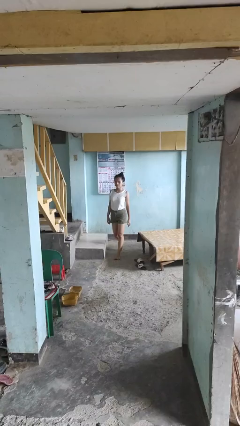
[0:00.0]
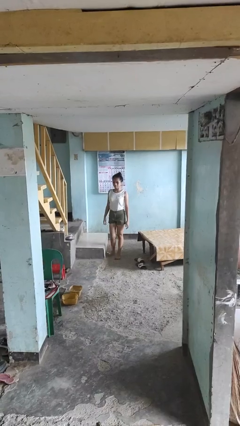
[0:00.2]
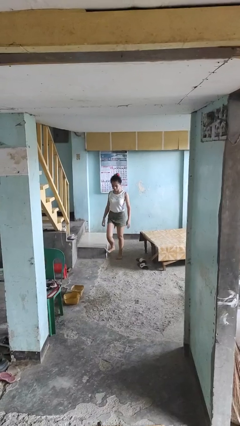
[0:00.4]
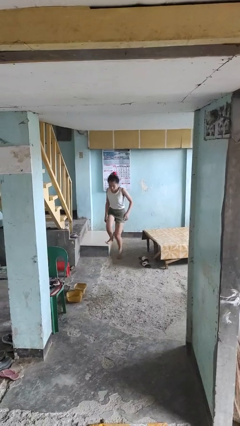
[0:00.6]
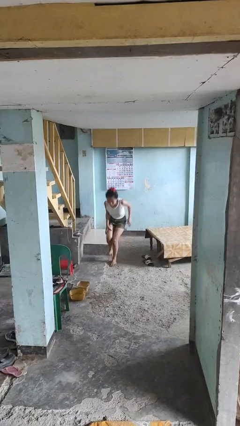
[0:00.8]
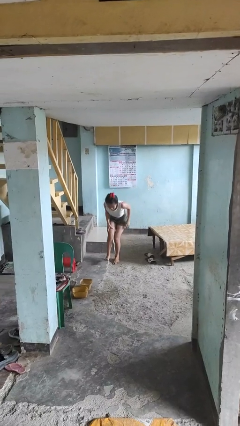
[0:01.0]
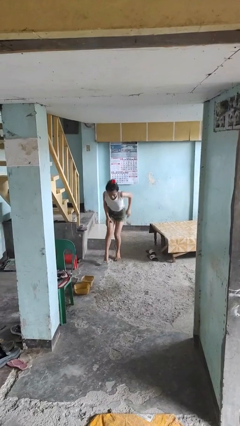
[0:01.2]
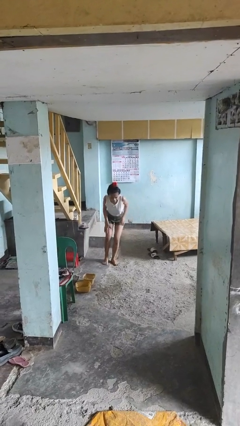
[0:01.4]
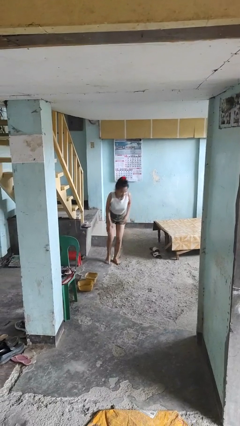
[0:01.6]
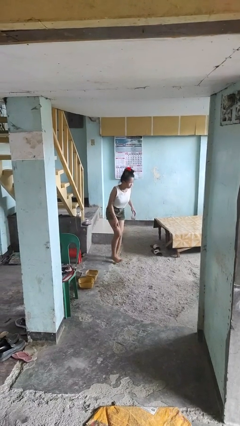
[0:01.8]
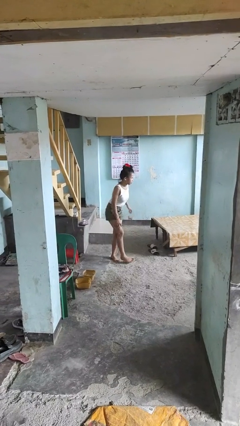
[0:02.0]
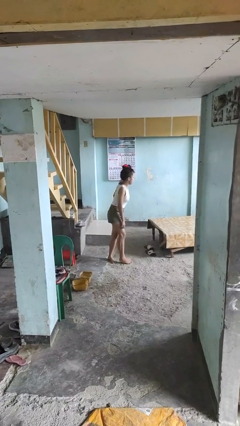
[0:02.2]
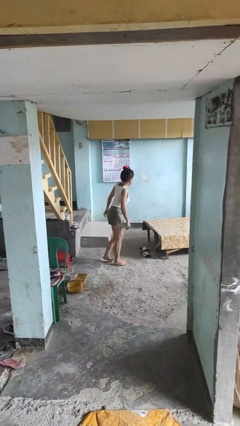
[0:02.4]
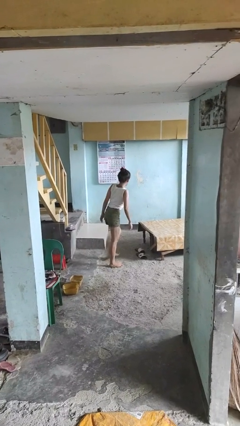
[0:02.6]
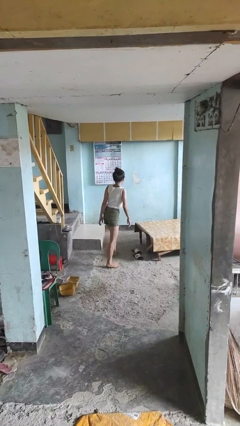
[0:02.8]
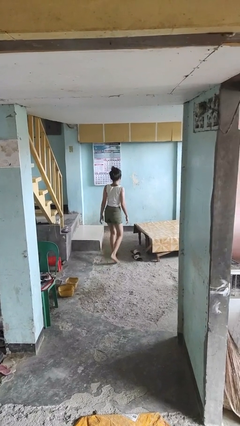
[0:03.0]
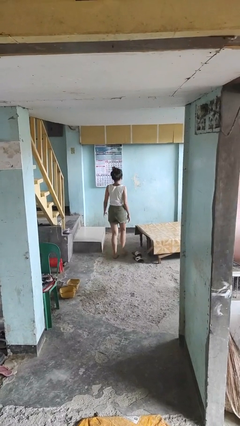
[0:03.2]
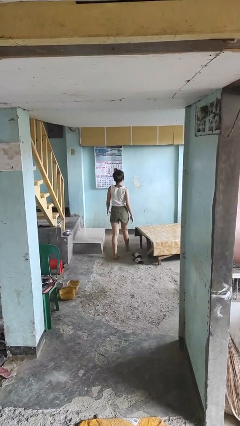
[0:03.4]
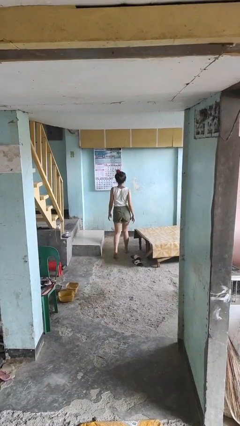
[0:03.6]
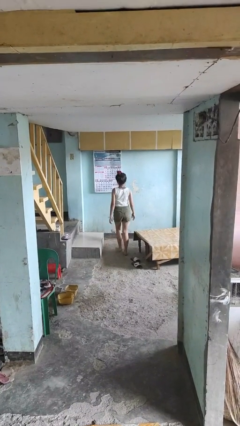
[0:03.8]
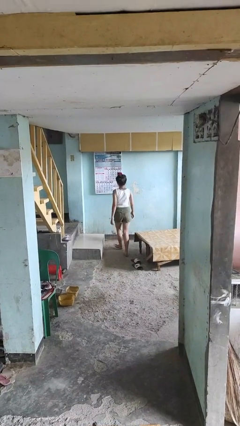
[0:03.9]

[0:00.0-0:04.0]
person stubs toe

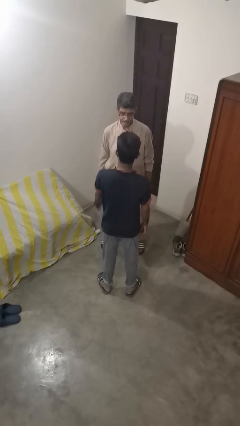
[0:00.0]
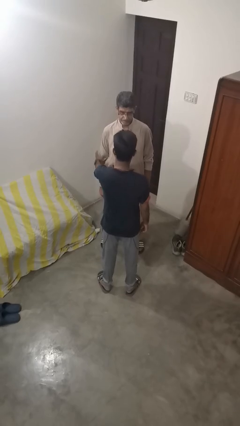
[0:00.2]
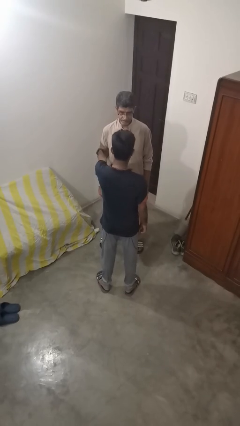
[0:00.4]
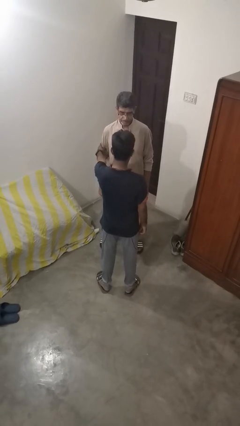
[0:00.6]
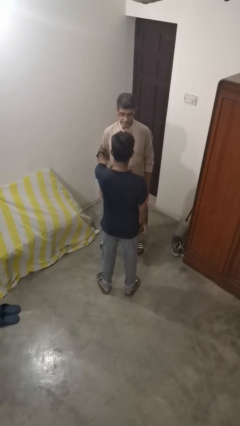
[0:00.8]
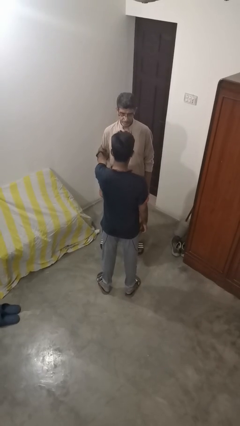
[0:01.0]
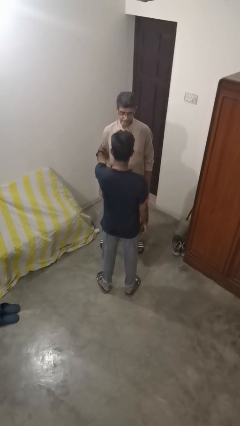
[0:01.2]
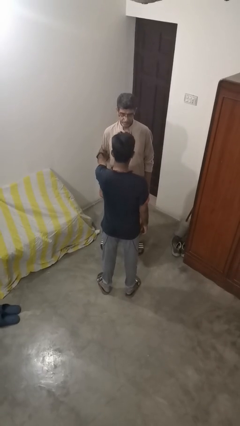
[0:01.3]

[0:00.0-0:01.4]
person grabs person by bicep

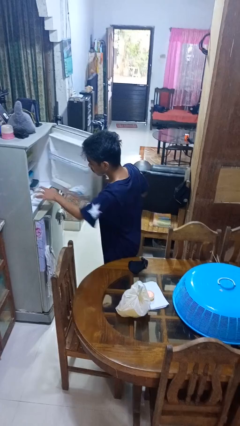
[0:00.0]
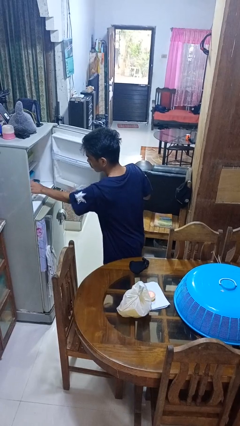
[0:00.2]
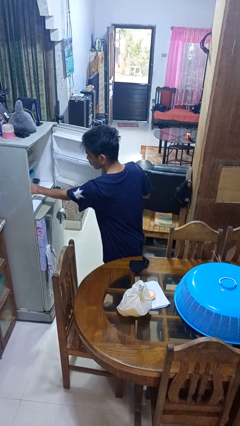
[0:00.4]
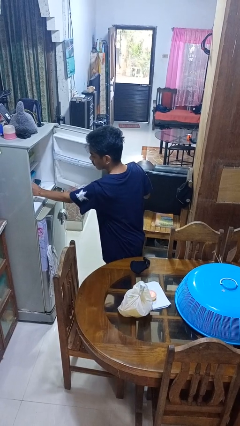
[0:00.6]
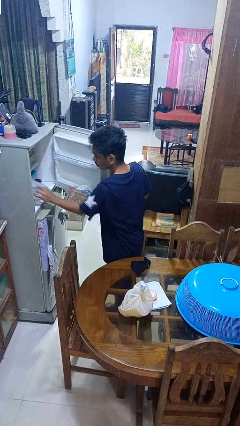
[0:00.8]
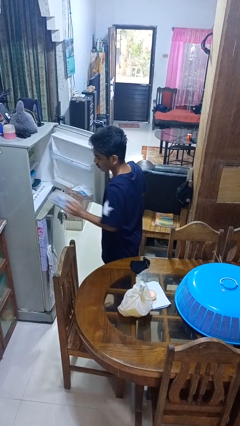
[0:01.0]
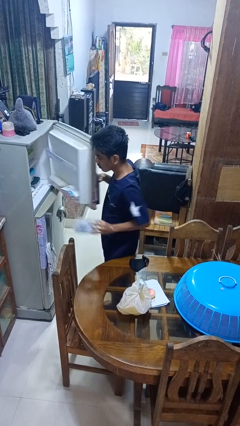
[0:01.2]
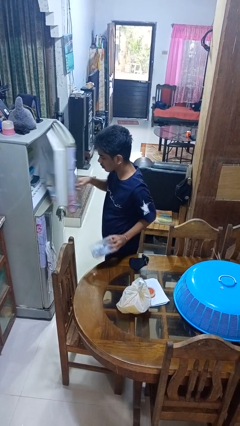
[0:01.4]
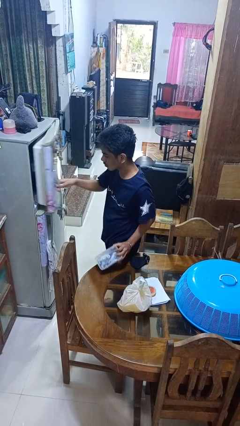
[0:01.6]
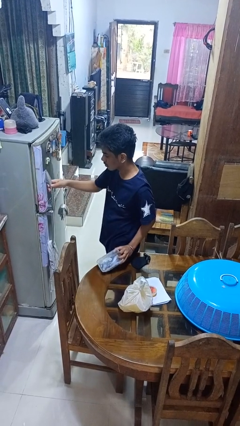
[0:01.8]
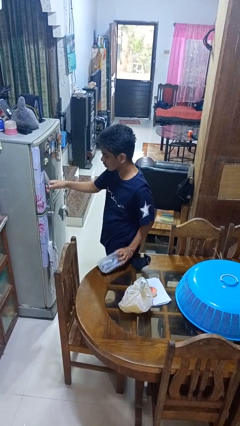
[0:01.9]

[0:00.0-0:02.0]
person takes object from refrigerator

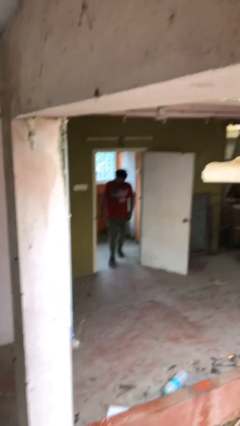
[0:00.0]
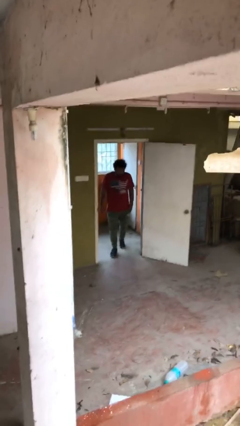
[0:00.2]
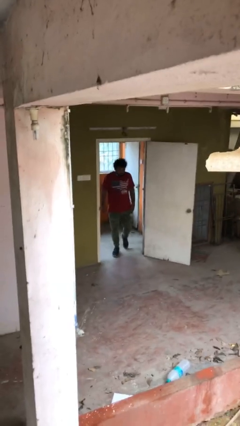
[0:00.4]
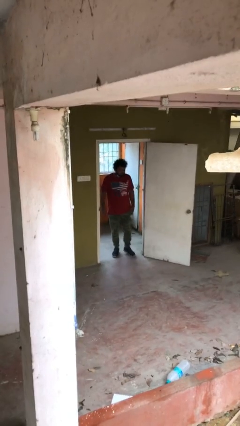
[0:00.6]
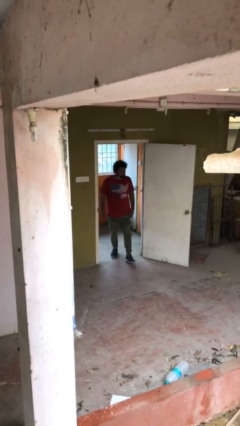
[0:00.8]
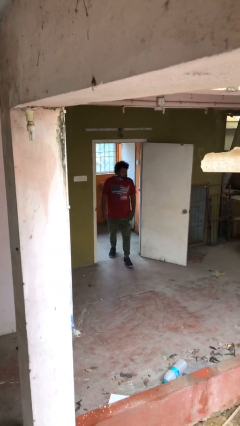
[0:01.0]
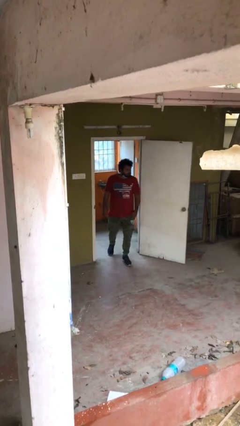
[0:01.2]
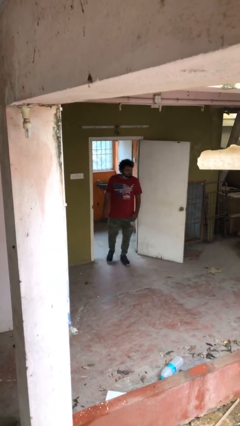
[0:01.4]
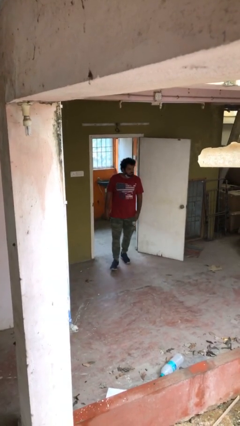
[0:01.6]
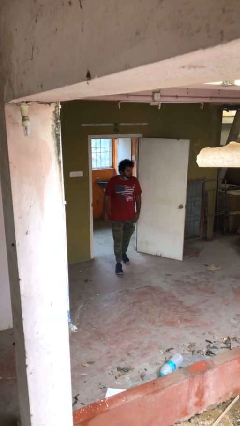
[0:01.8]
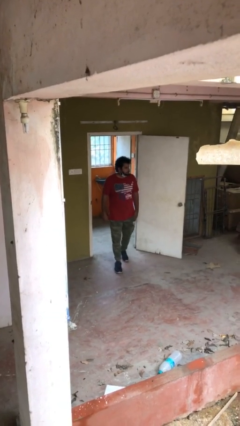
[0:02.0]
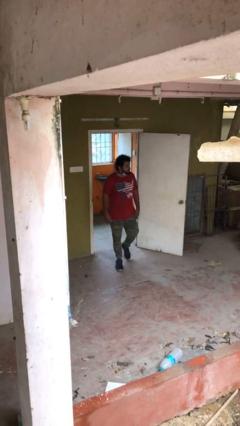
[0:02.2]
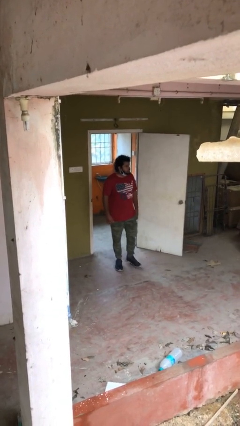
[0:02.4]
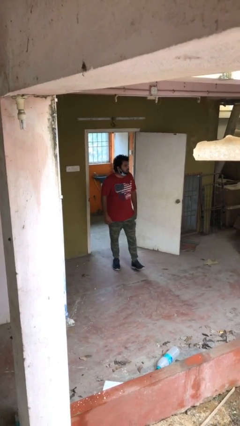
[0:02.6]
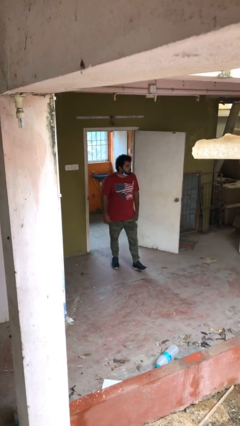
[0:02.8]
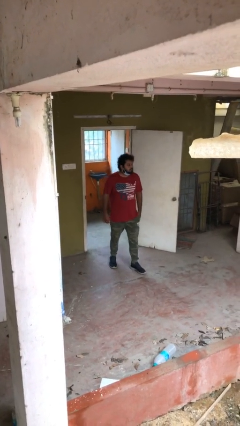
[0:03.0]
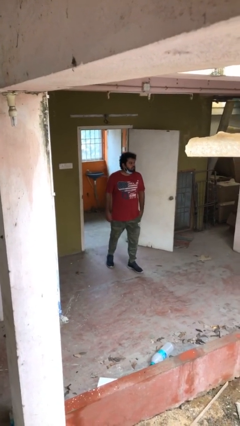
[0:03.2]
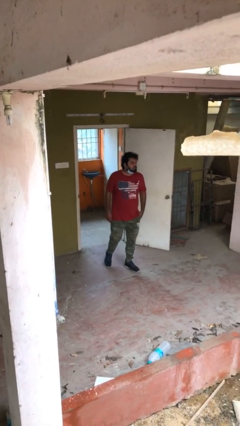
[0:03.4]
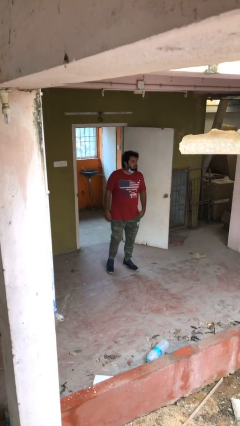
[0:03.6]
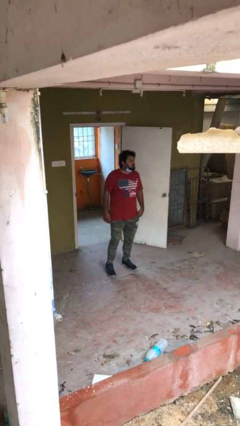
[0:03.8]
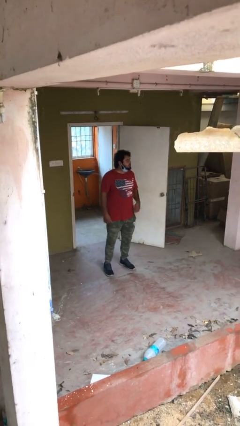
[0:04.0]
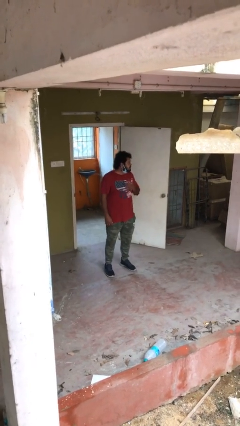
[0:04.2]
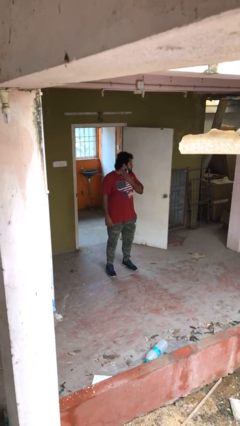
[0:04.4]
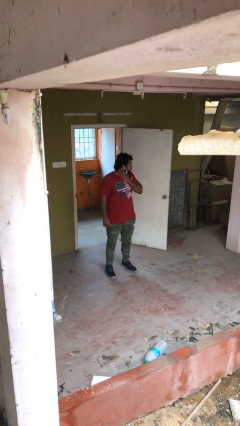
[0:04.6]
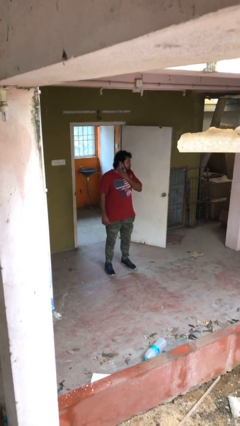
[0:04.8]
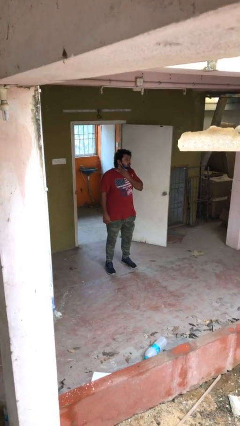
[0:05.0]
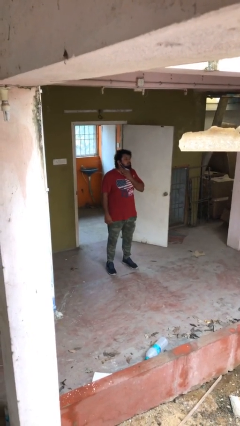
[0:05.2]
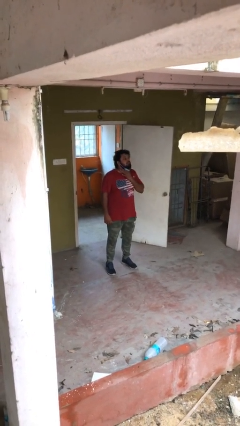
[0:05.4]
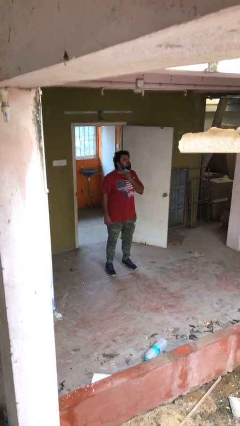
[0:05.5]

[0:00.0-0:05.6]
person enters scene through structure

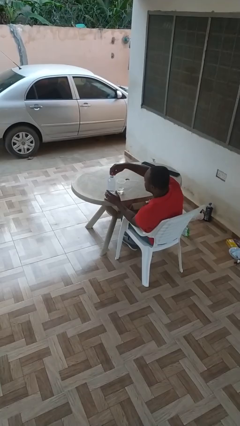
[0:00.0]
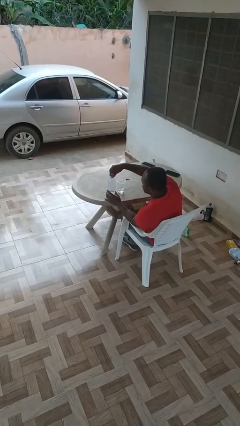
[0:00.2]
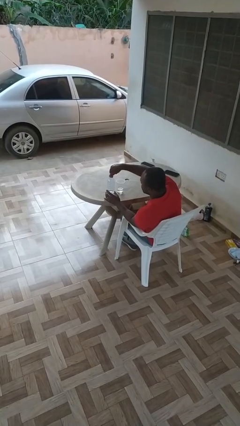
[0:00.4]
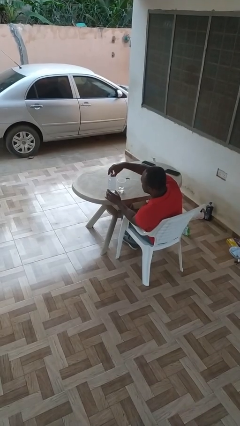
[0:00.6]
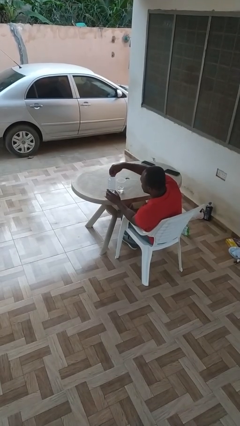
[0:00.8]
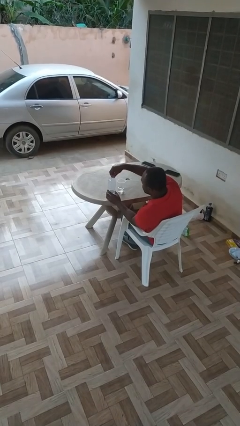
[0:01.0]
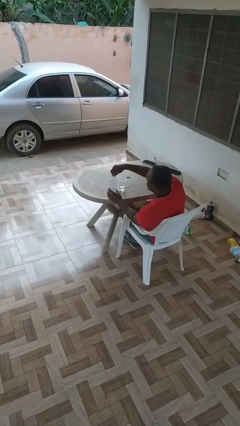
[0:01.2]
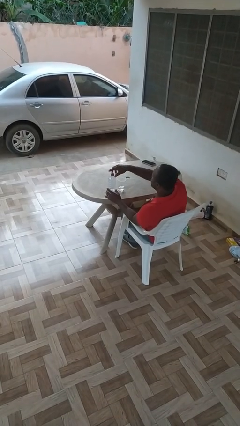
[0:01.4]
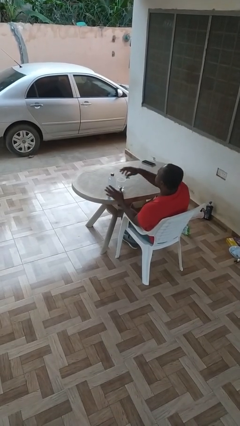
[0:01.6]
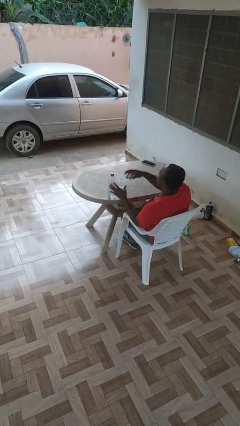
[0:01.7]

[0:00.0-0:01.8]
person screws lid to bottle

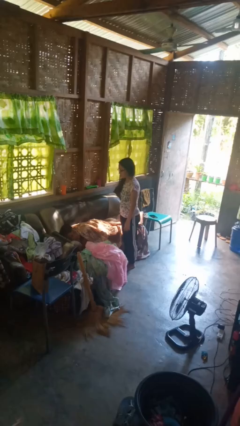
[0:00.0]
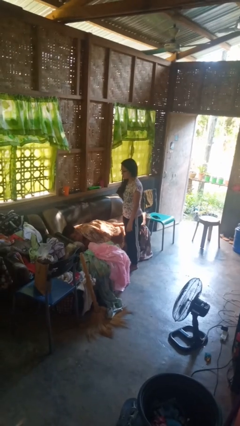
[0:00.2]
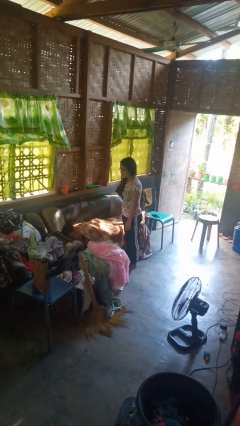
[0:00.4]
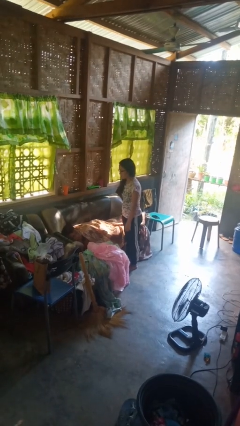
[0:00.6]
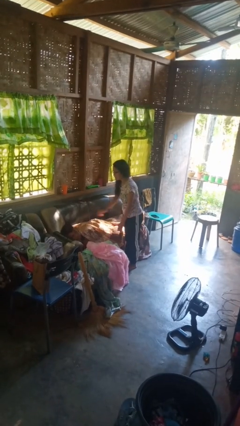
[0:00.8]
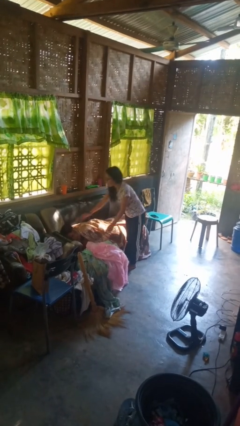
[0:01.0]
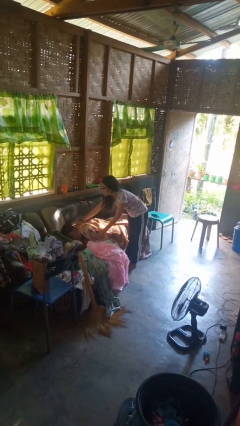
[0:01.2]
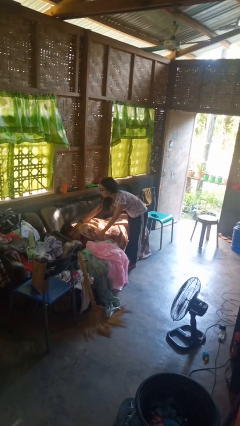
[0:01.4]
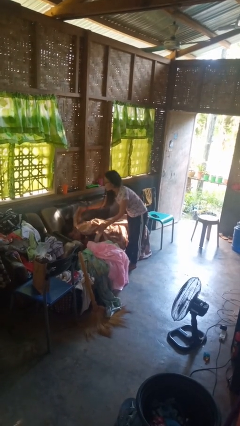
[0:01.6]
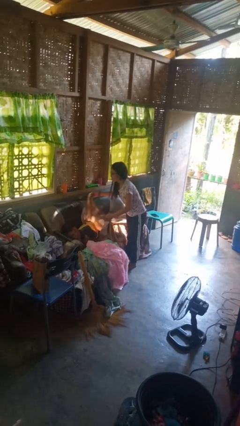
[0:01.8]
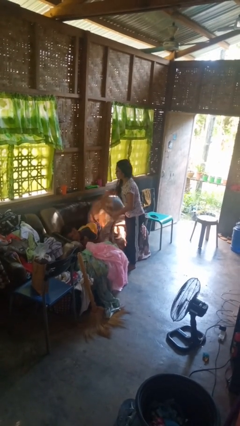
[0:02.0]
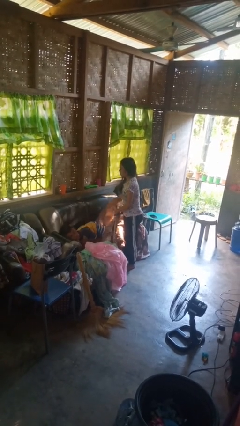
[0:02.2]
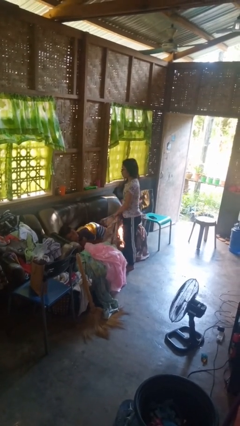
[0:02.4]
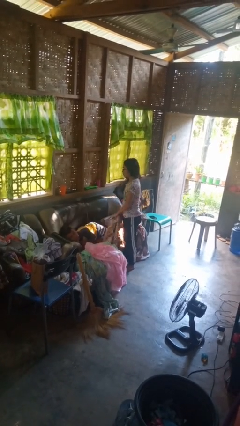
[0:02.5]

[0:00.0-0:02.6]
person uncovers friend with blanket
